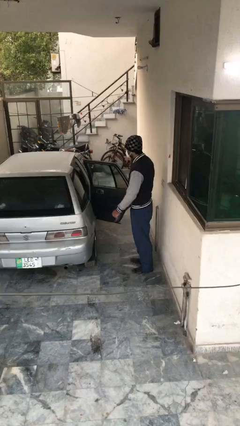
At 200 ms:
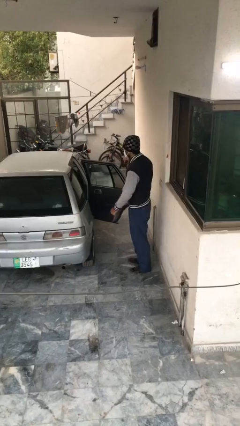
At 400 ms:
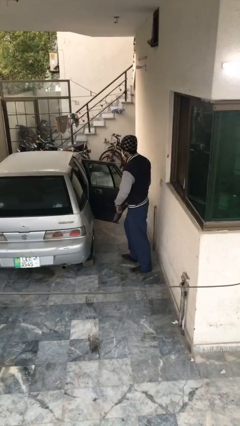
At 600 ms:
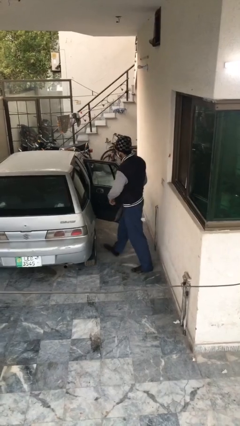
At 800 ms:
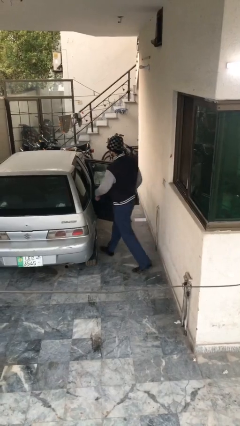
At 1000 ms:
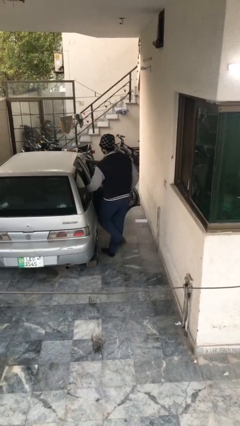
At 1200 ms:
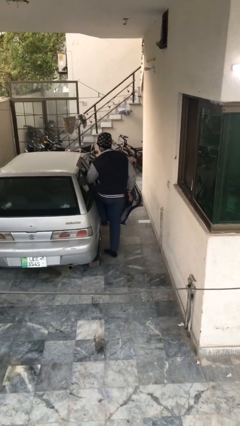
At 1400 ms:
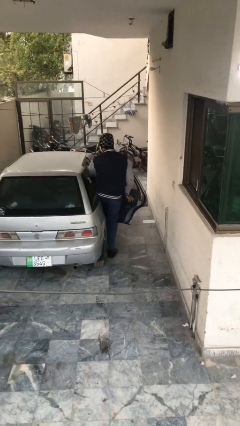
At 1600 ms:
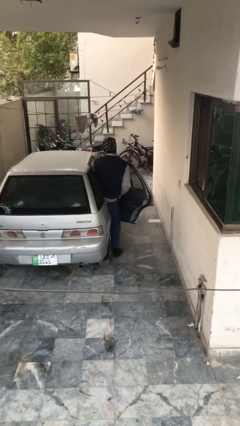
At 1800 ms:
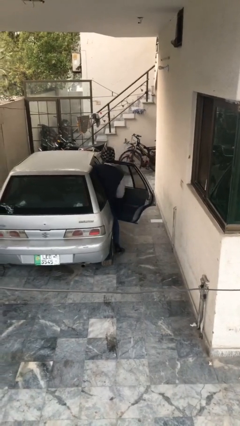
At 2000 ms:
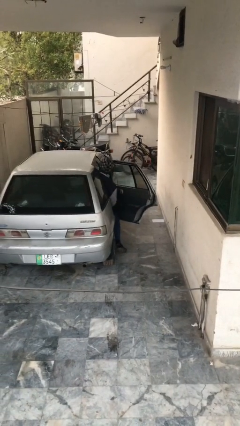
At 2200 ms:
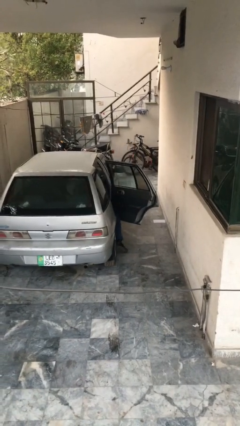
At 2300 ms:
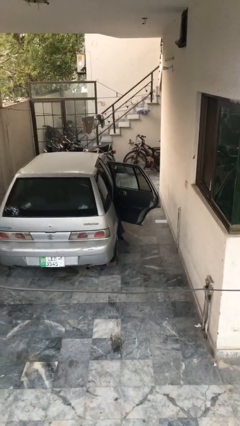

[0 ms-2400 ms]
person enters car

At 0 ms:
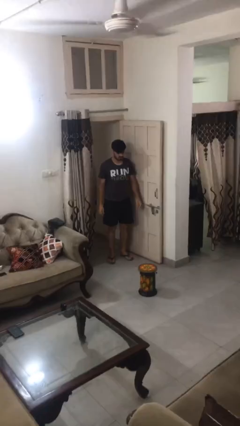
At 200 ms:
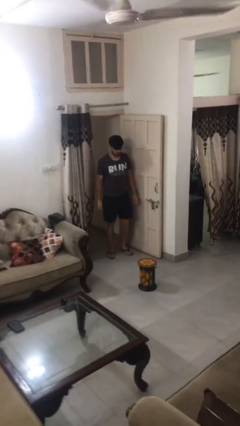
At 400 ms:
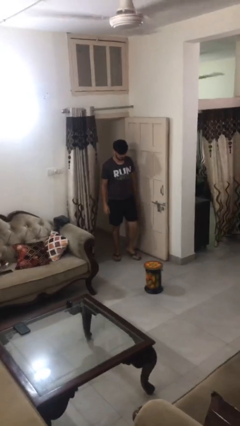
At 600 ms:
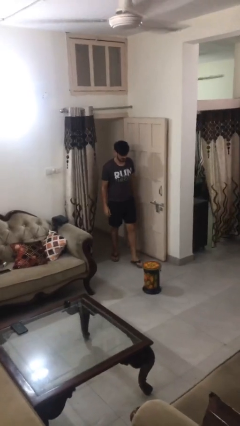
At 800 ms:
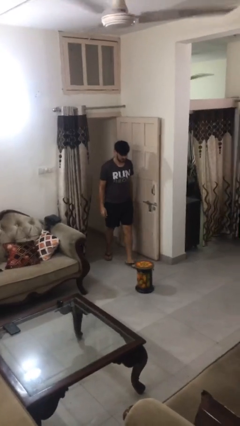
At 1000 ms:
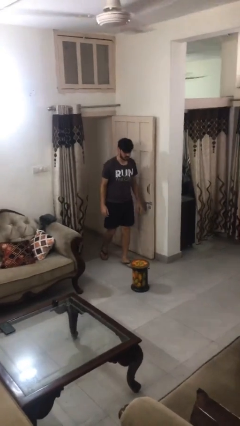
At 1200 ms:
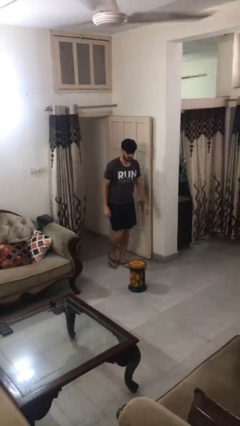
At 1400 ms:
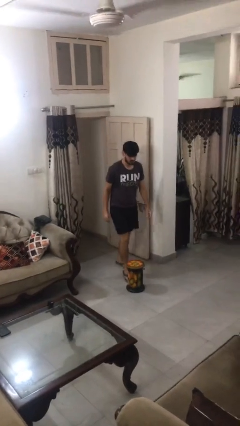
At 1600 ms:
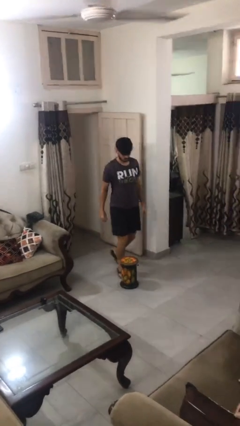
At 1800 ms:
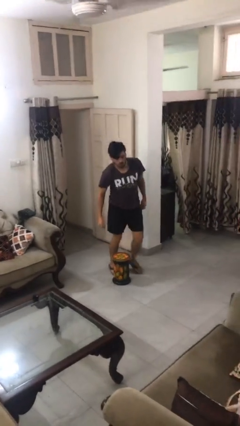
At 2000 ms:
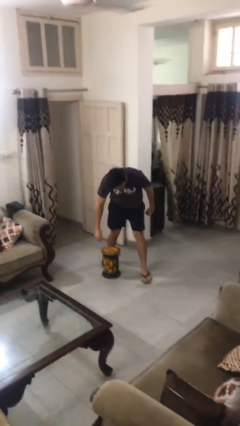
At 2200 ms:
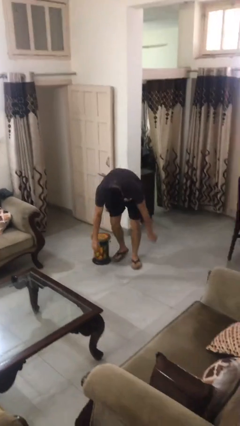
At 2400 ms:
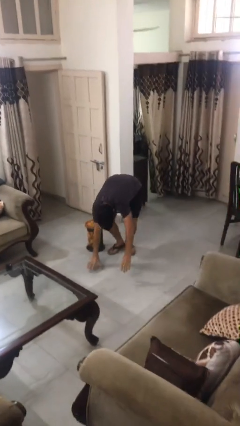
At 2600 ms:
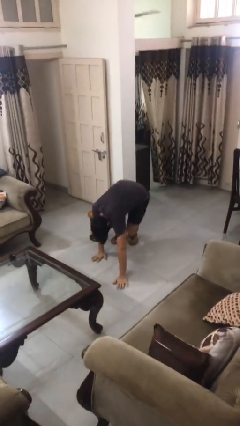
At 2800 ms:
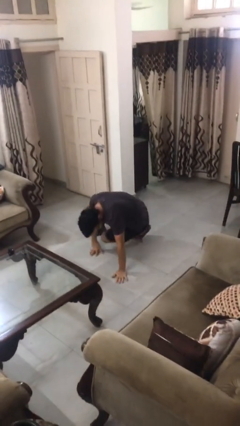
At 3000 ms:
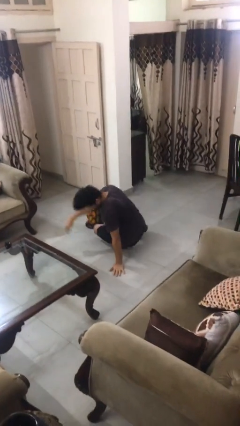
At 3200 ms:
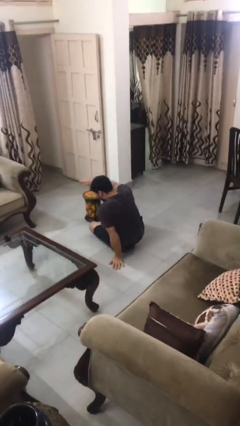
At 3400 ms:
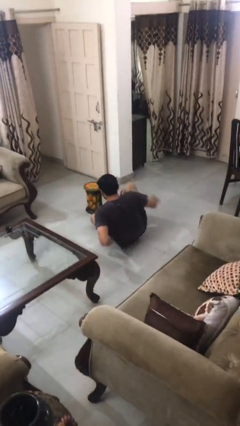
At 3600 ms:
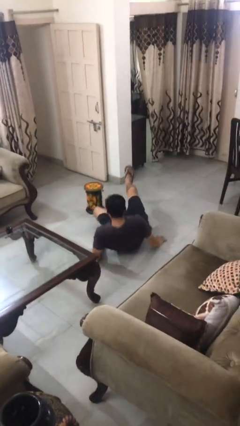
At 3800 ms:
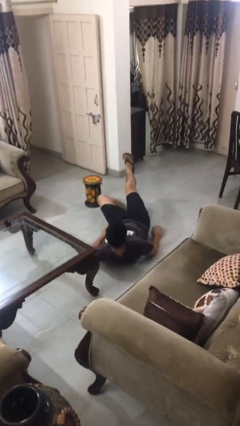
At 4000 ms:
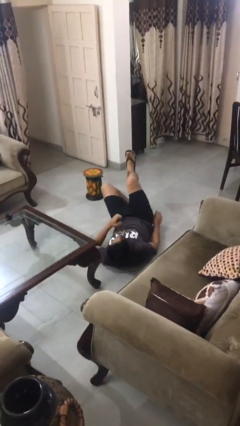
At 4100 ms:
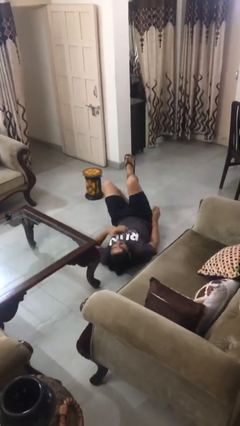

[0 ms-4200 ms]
person trips on object on floor

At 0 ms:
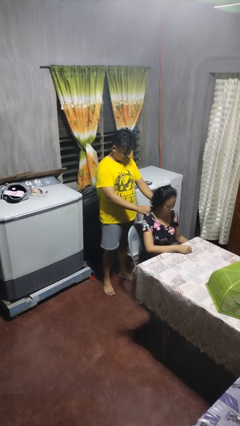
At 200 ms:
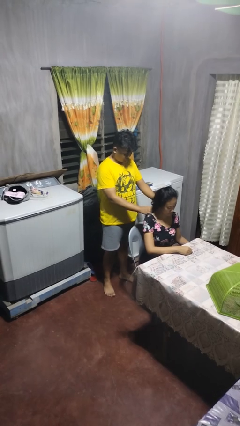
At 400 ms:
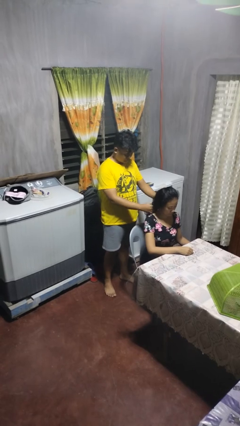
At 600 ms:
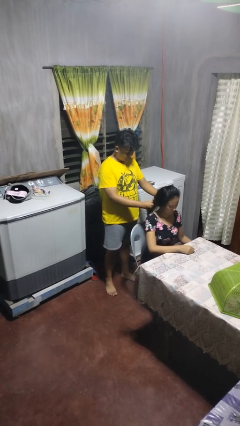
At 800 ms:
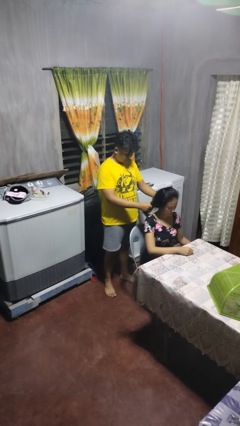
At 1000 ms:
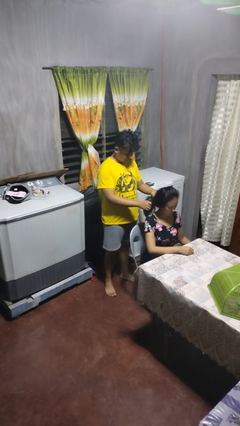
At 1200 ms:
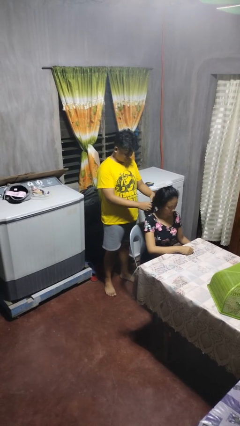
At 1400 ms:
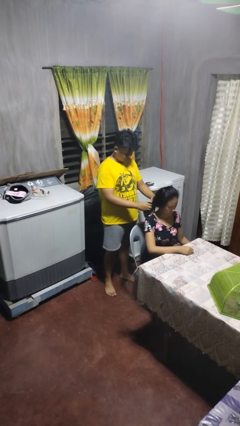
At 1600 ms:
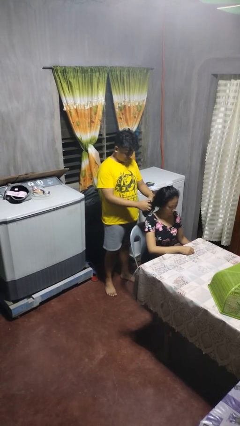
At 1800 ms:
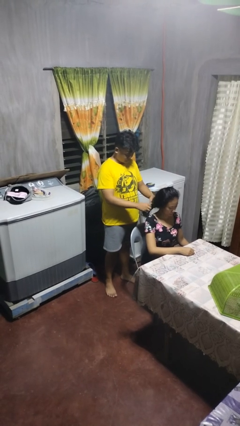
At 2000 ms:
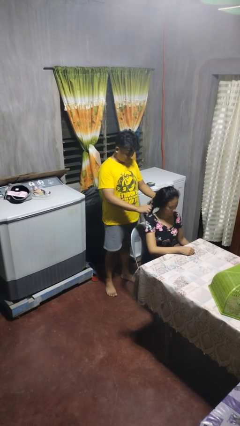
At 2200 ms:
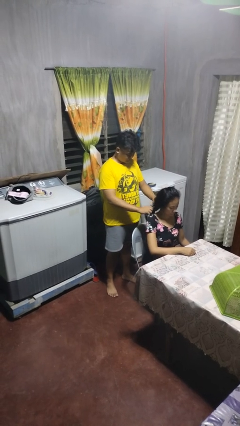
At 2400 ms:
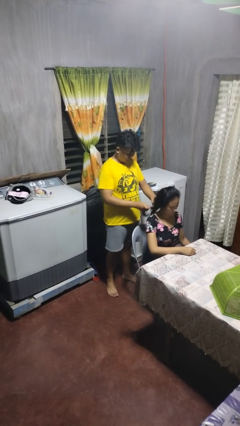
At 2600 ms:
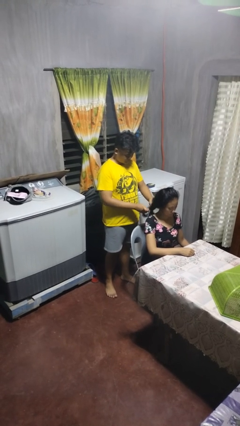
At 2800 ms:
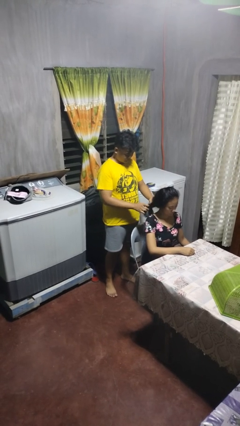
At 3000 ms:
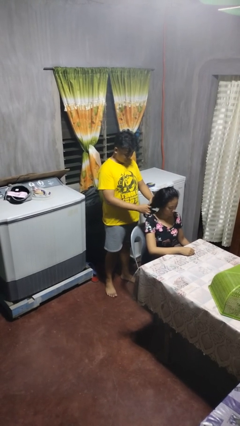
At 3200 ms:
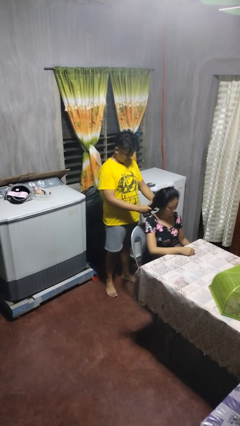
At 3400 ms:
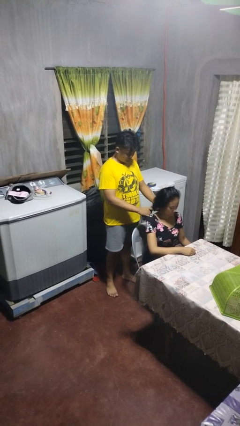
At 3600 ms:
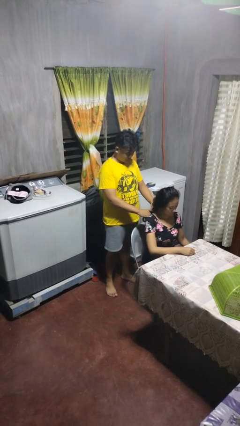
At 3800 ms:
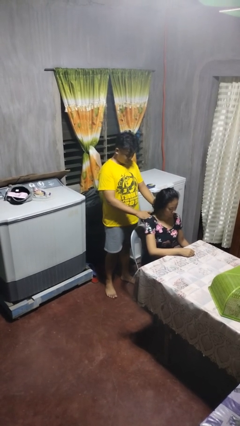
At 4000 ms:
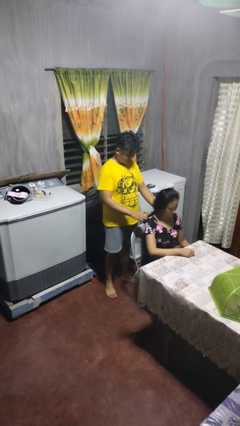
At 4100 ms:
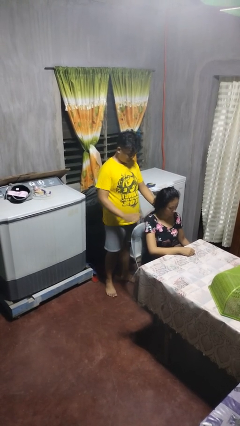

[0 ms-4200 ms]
person braids hair of person

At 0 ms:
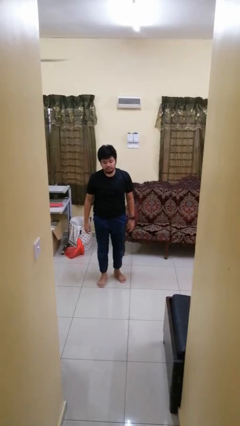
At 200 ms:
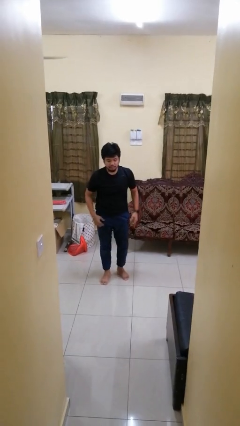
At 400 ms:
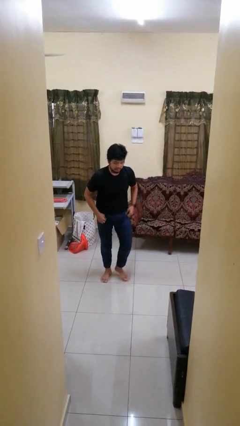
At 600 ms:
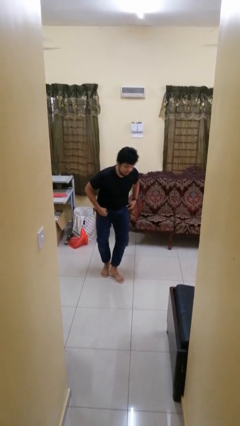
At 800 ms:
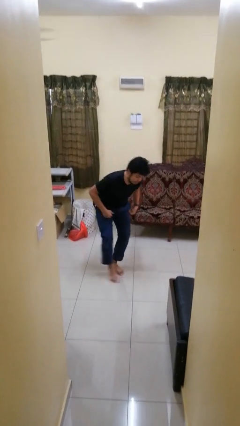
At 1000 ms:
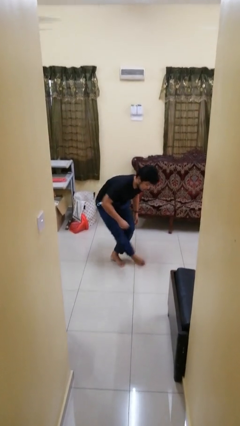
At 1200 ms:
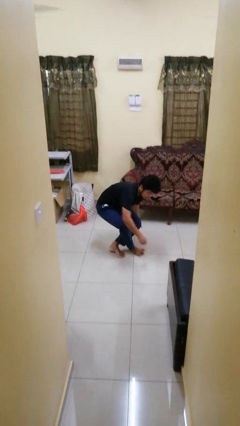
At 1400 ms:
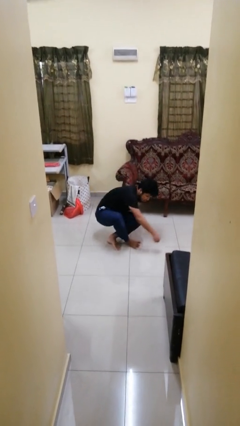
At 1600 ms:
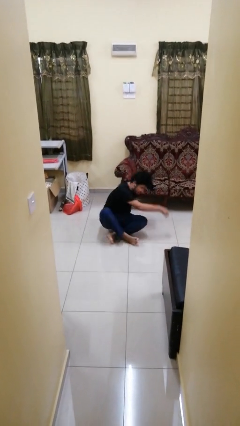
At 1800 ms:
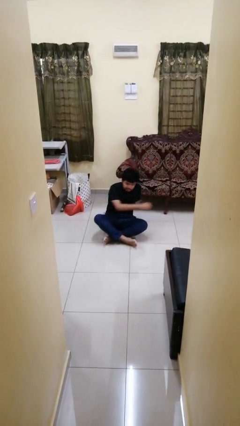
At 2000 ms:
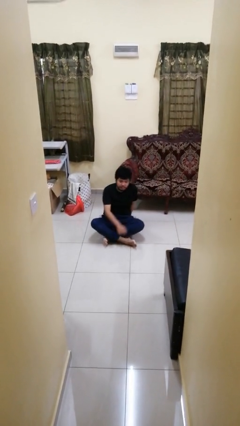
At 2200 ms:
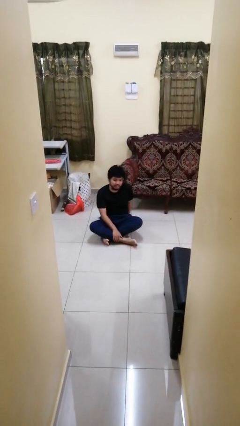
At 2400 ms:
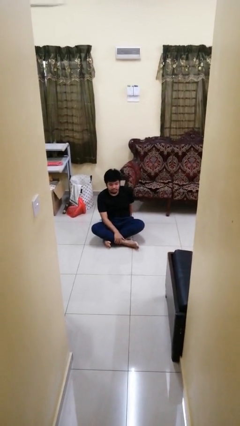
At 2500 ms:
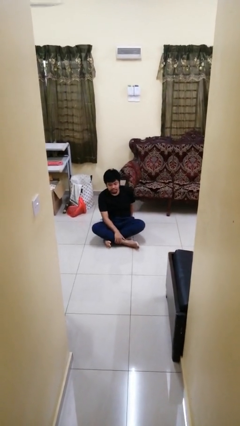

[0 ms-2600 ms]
person sits crisscross

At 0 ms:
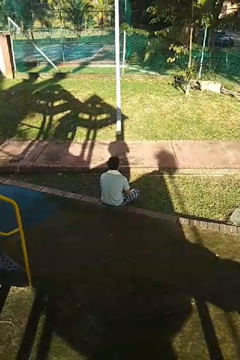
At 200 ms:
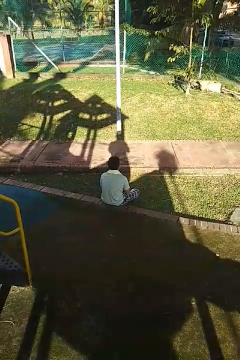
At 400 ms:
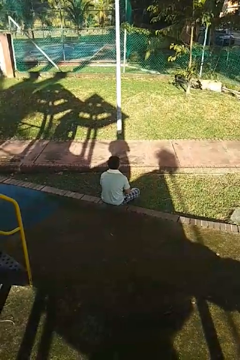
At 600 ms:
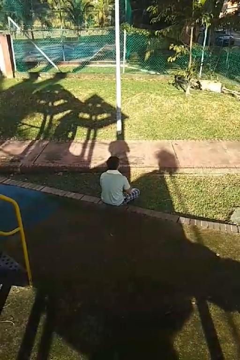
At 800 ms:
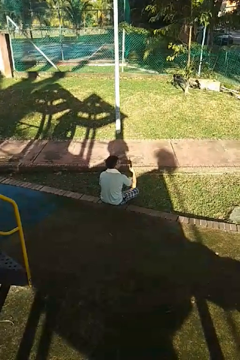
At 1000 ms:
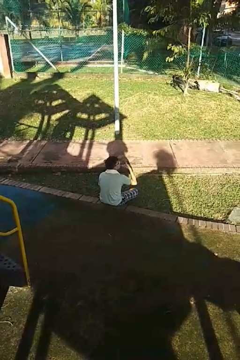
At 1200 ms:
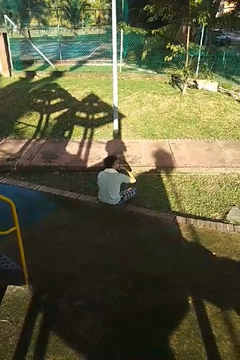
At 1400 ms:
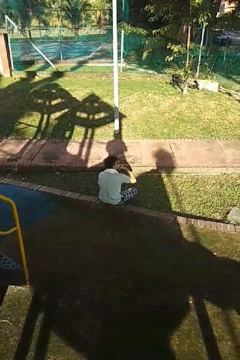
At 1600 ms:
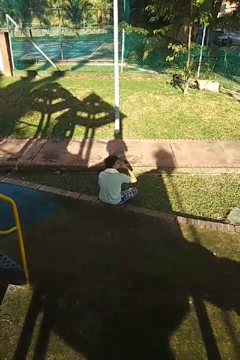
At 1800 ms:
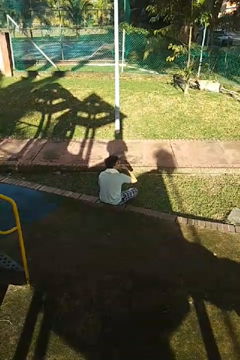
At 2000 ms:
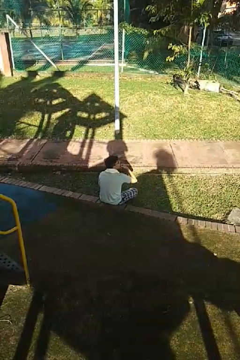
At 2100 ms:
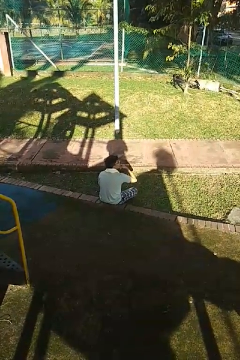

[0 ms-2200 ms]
person strokes chin

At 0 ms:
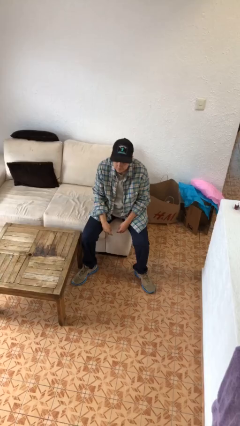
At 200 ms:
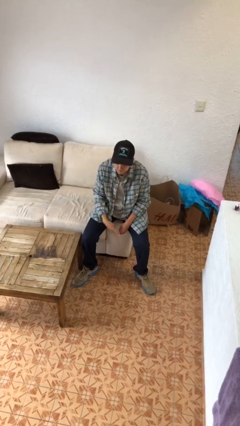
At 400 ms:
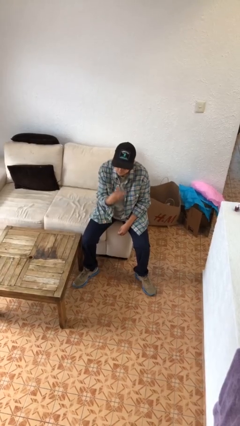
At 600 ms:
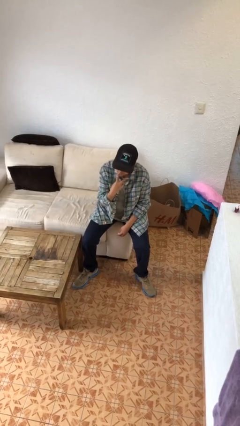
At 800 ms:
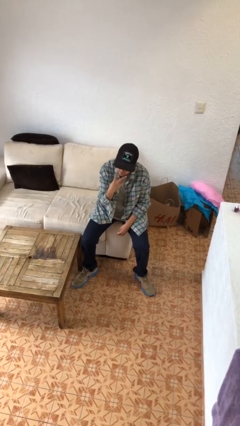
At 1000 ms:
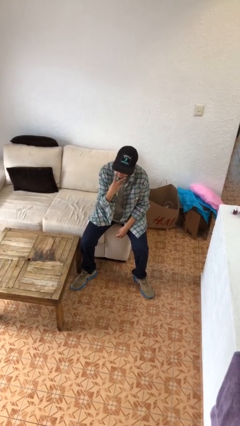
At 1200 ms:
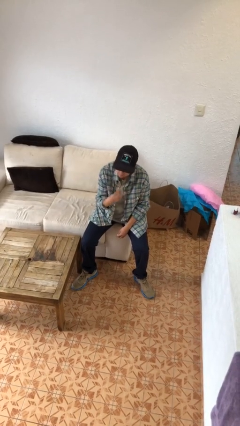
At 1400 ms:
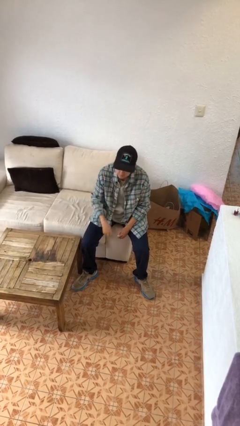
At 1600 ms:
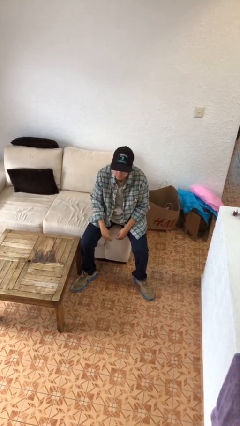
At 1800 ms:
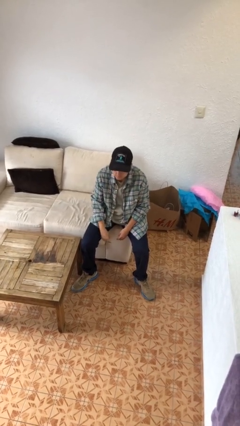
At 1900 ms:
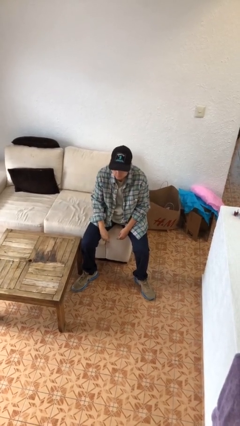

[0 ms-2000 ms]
person gestures watch closely
